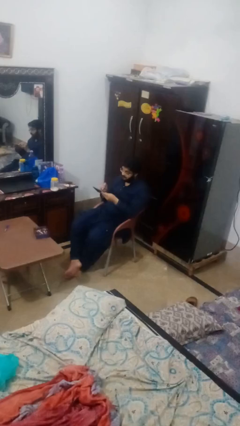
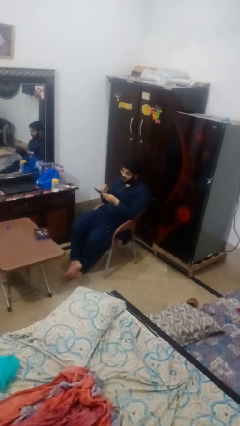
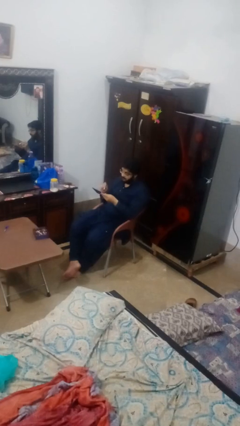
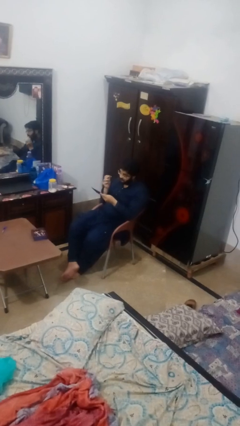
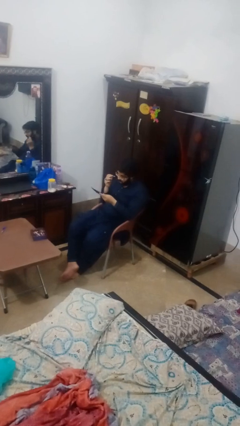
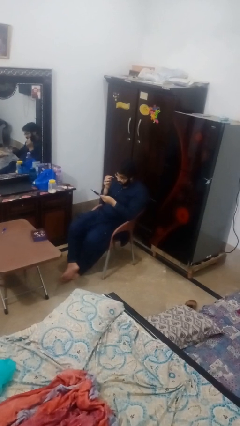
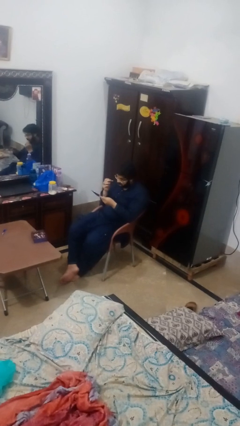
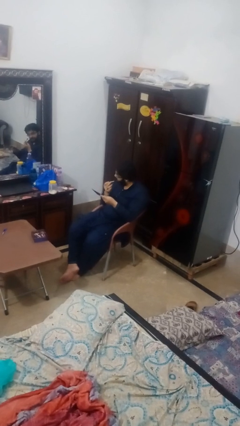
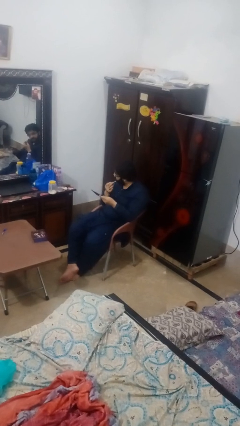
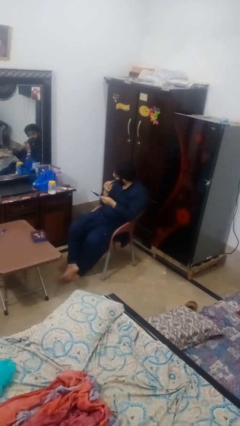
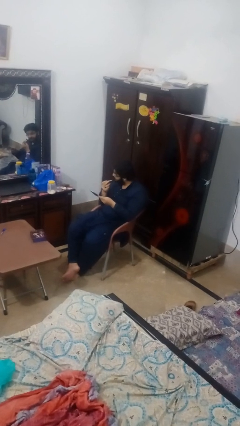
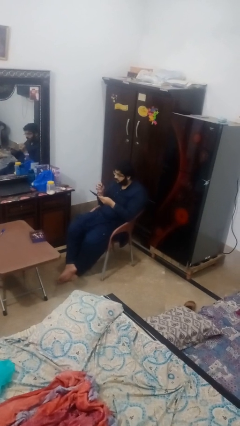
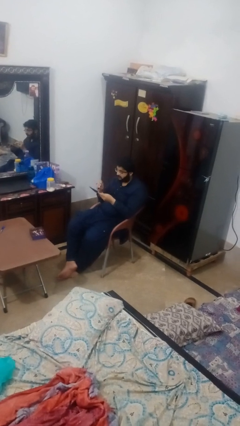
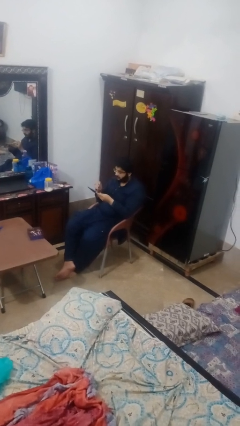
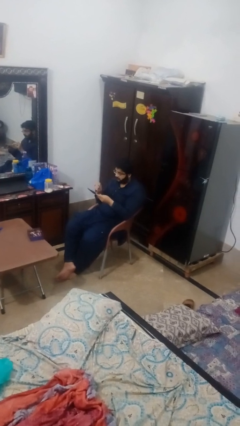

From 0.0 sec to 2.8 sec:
person applies foundation makeup

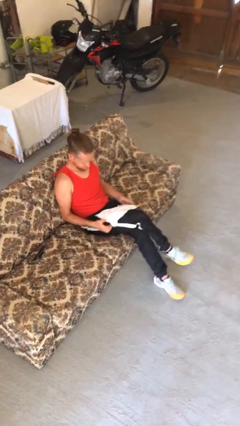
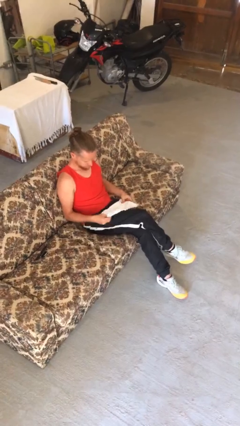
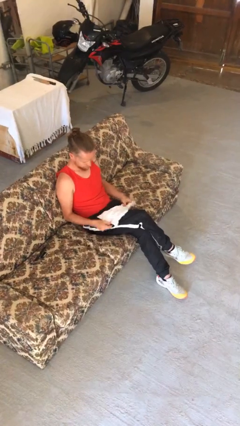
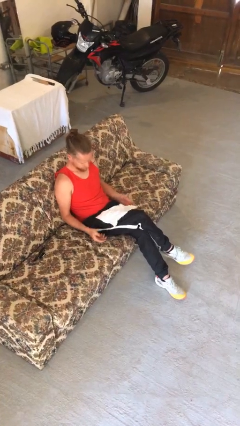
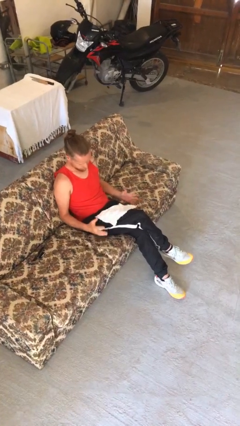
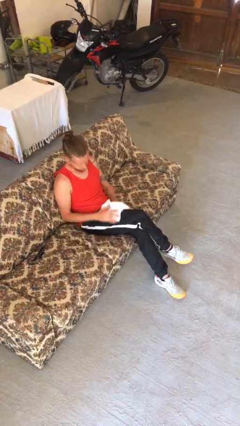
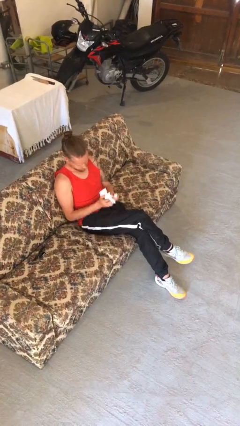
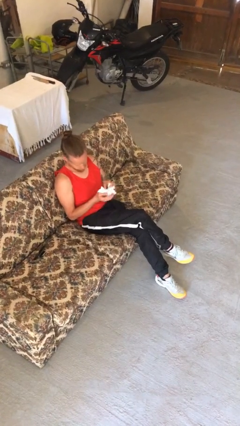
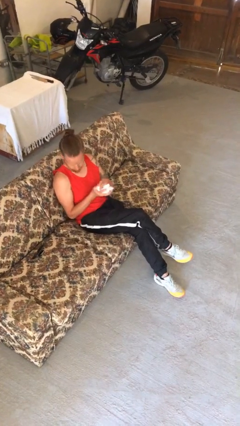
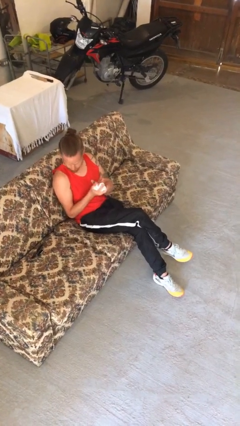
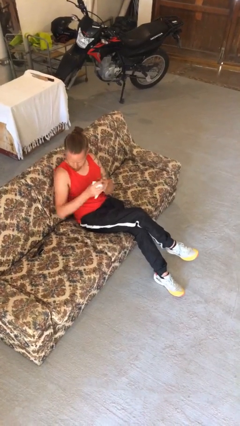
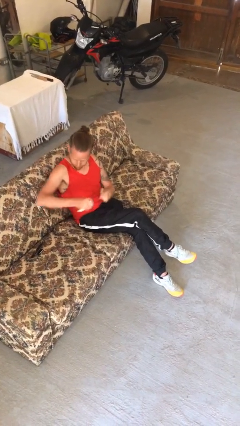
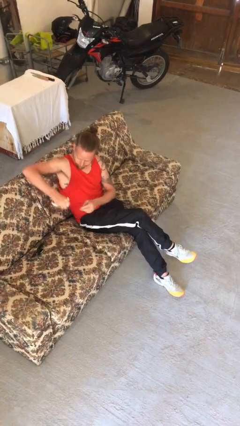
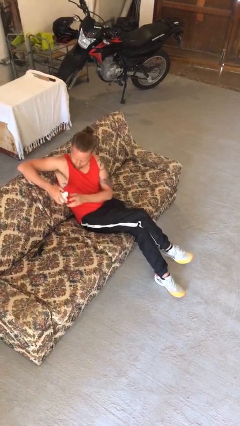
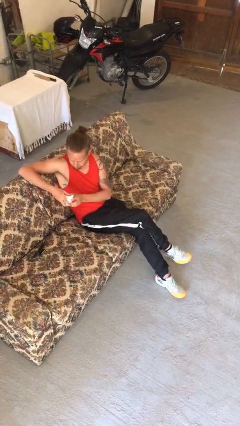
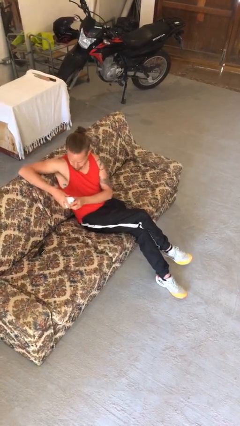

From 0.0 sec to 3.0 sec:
person crumples paper

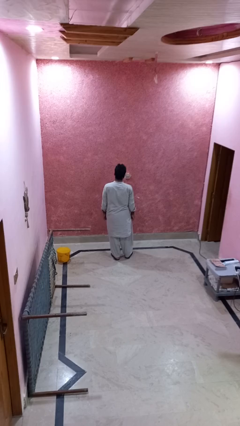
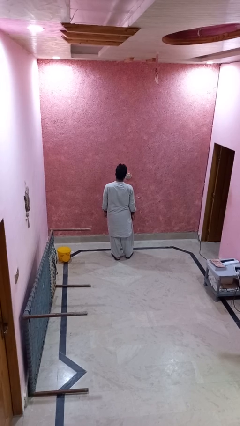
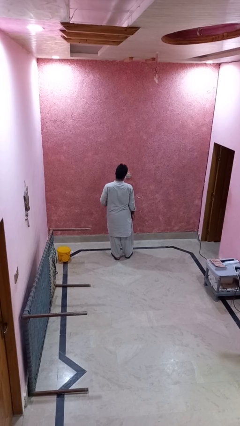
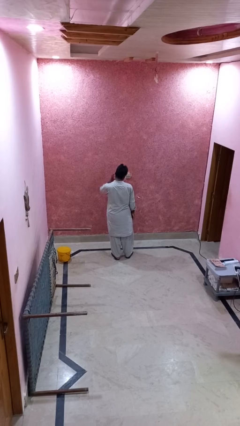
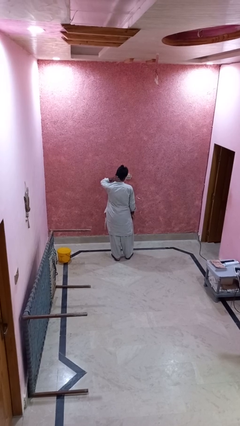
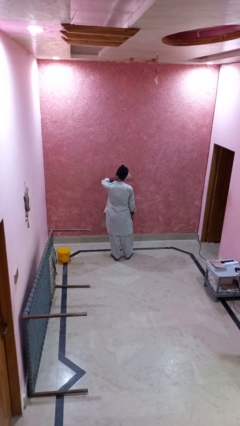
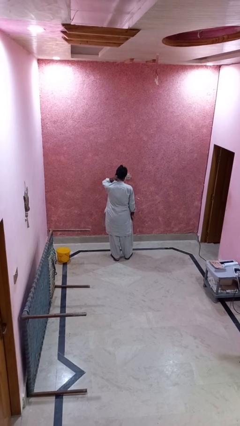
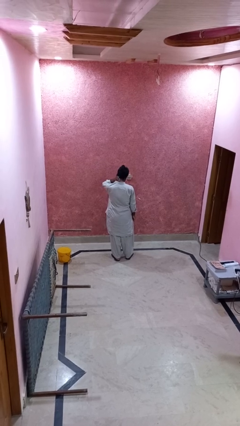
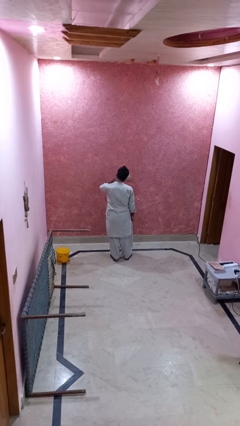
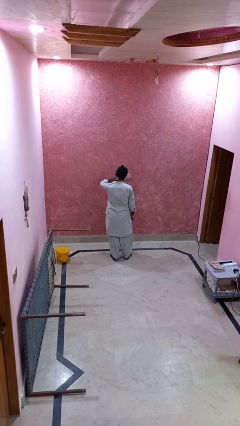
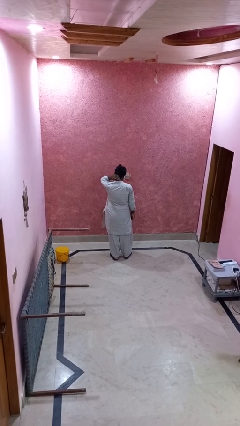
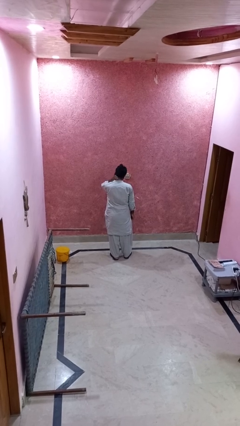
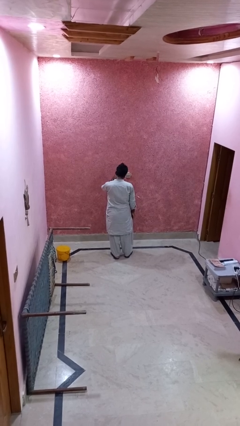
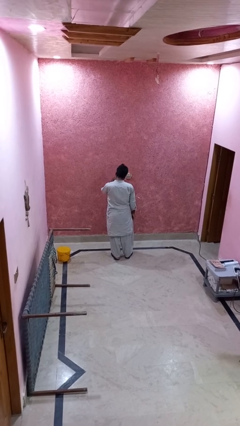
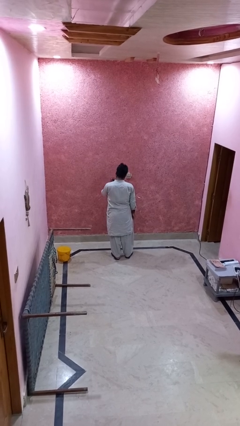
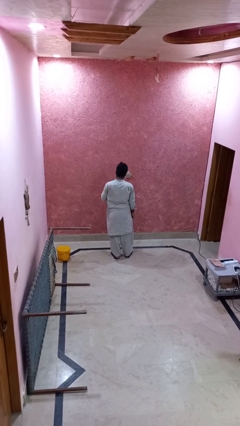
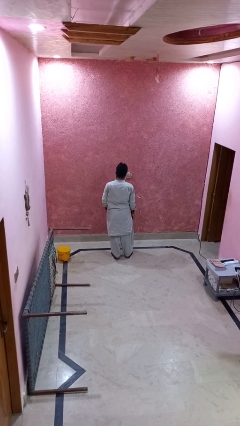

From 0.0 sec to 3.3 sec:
person rubs neck

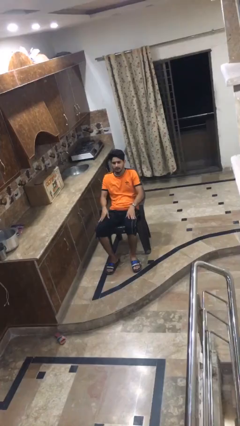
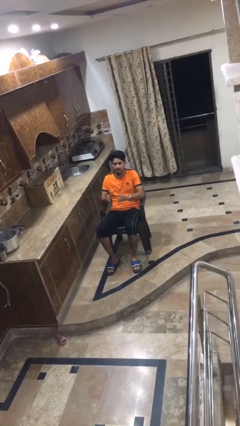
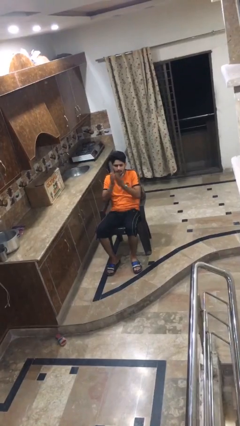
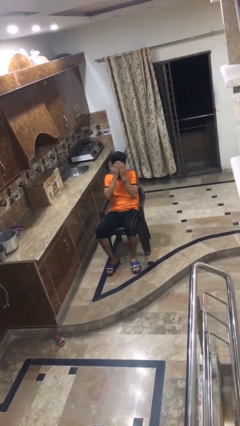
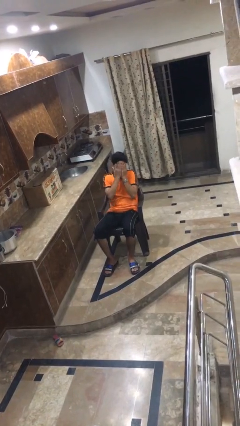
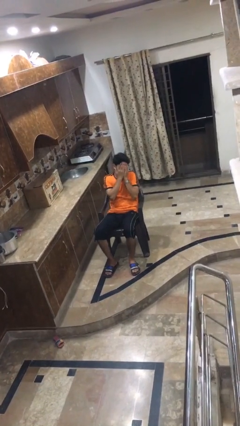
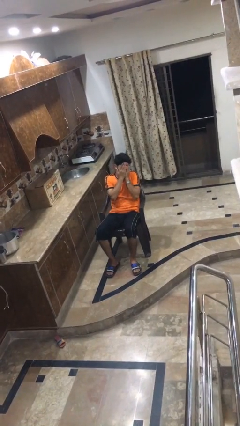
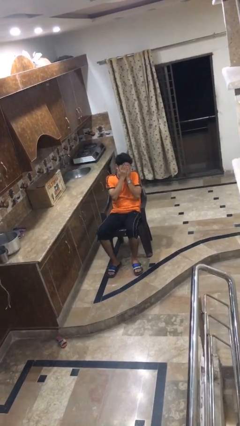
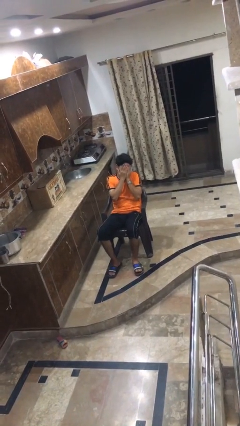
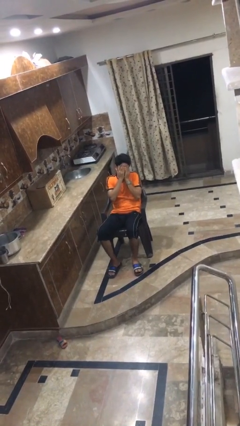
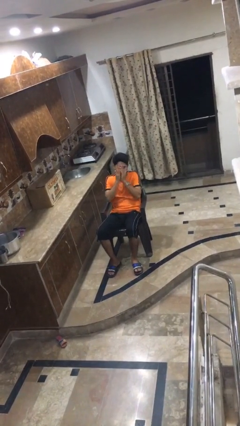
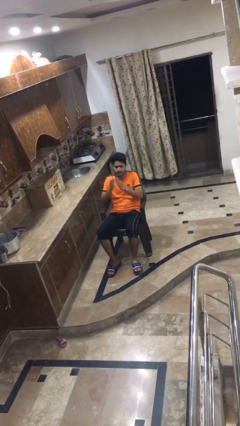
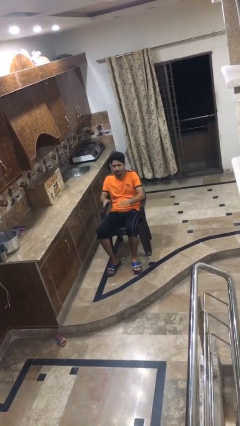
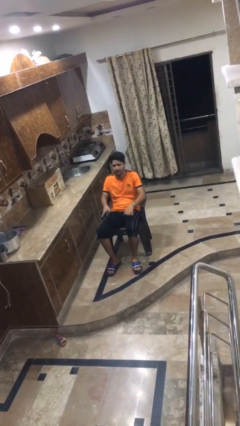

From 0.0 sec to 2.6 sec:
person covers face with hands

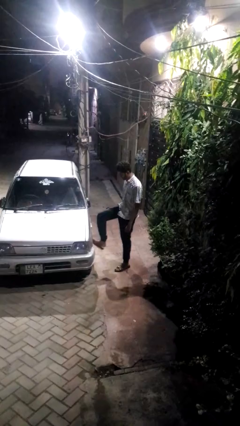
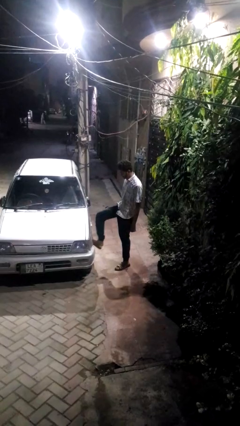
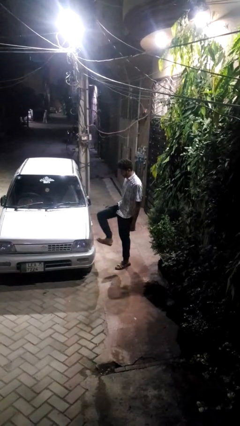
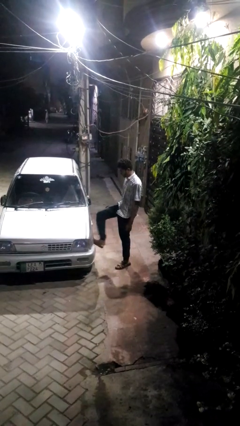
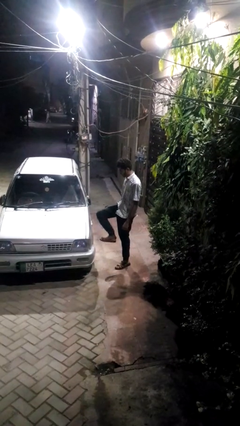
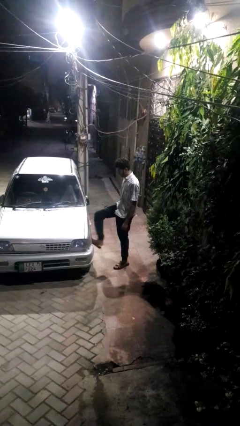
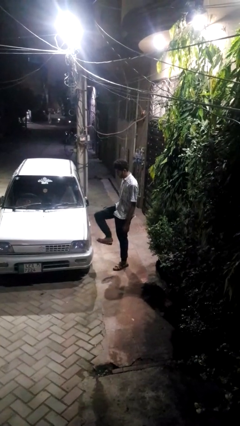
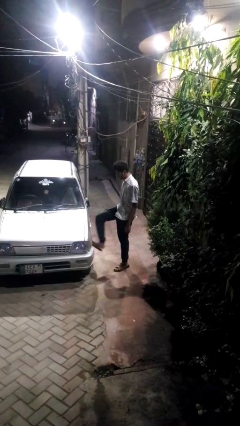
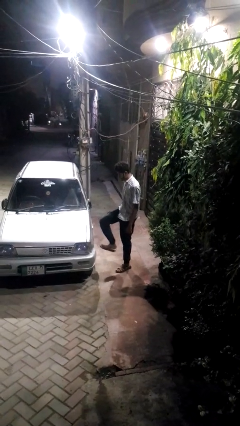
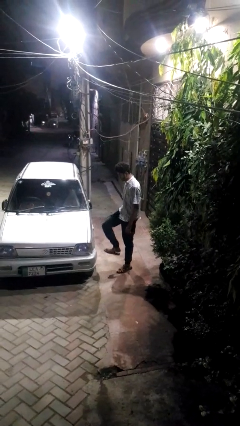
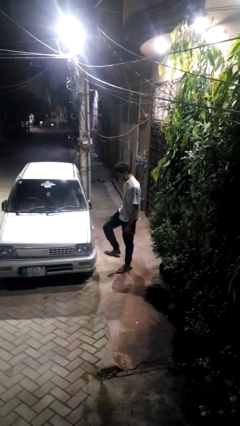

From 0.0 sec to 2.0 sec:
person kicks car tires

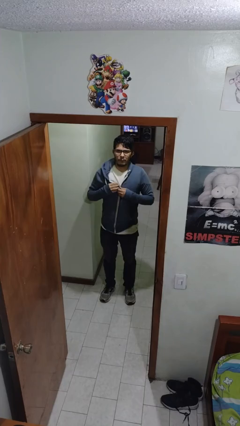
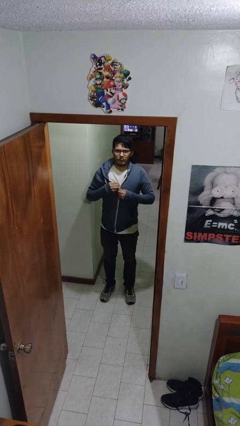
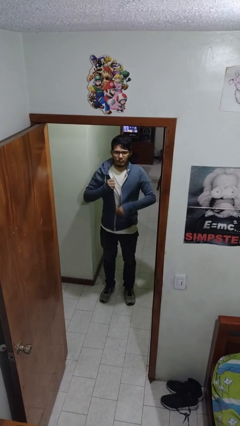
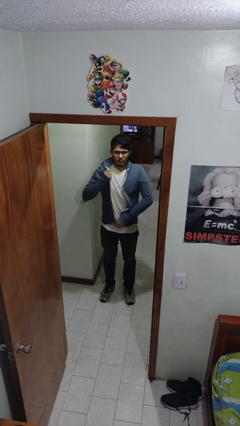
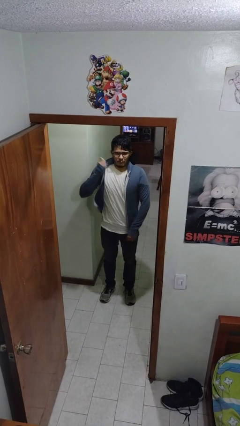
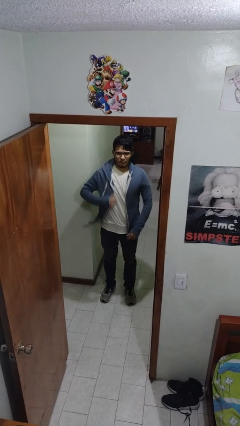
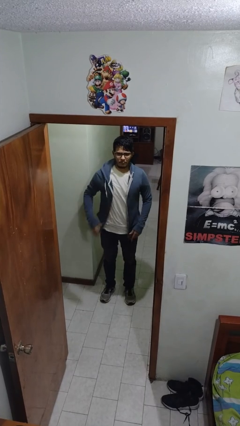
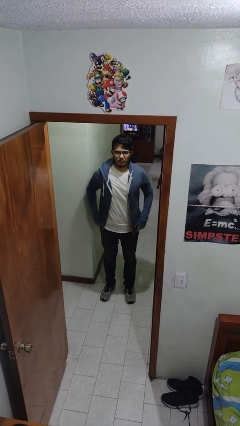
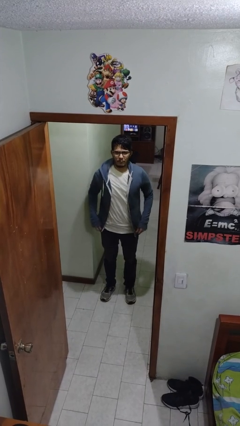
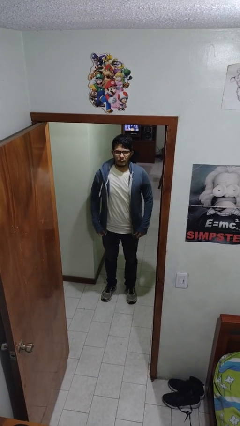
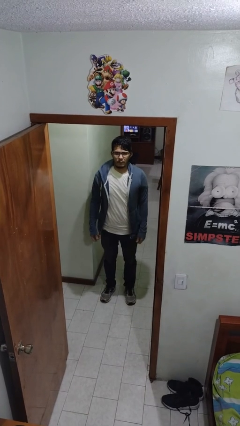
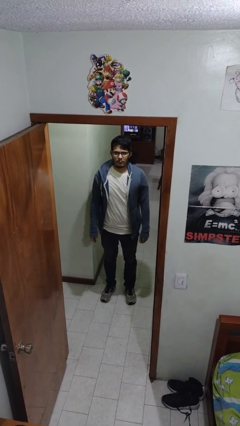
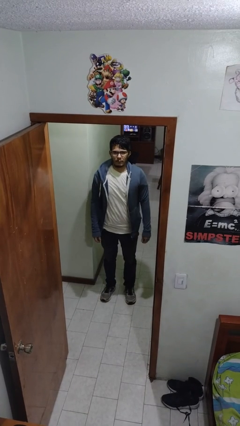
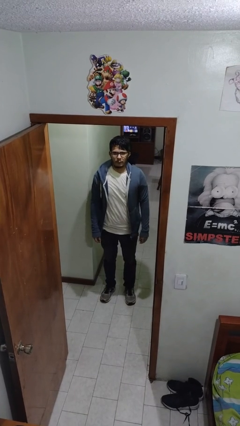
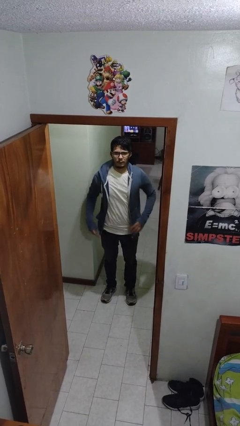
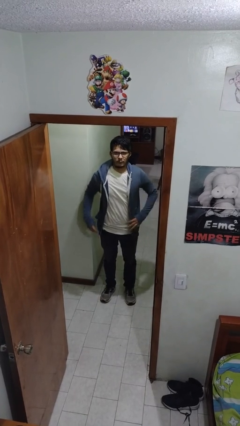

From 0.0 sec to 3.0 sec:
person unzips jacket

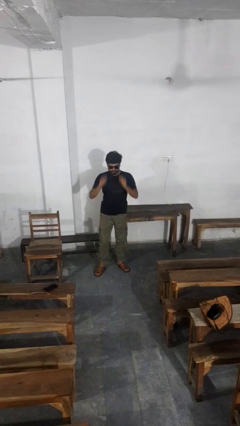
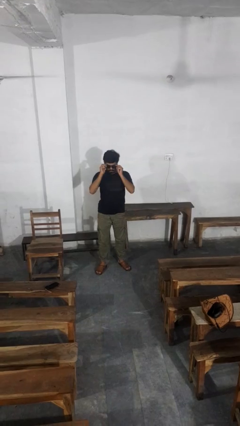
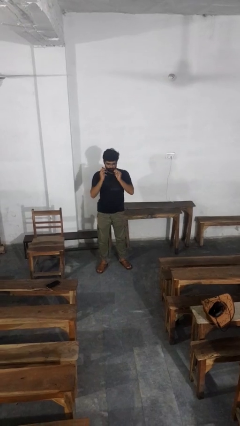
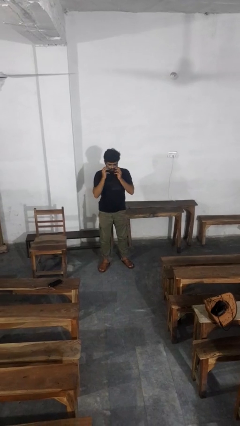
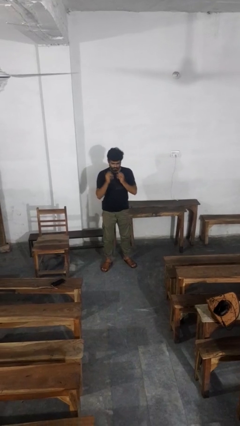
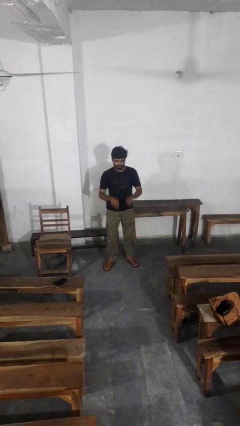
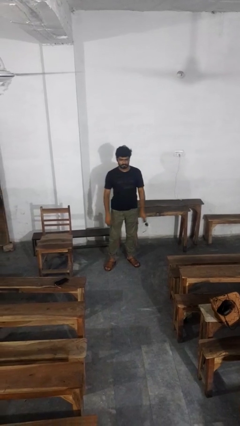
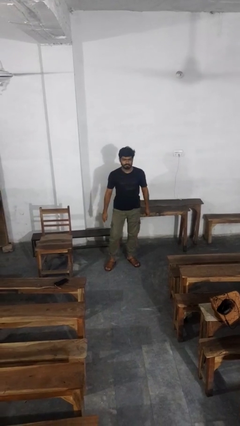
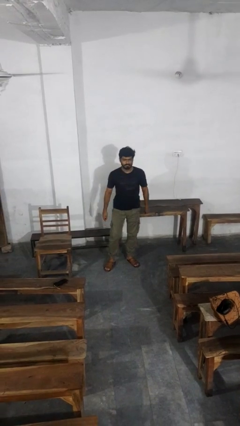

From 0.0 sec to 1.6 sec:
person takes off sunglasses
